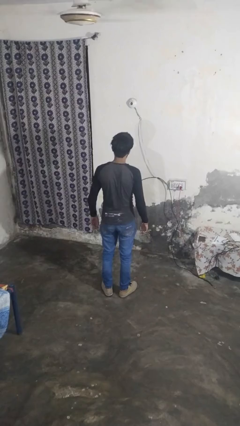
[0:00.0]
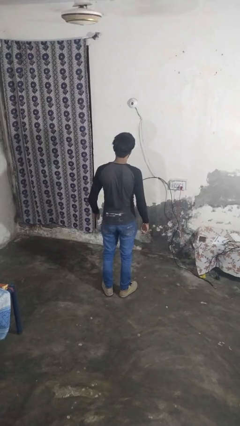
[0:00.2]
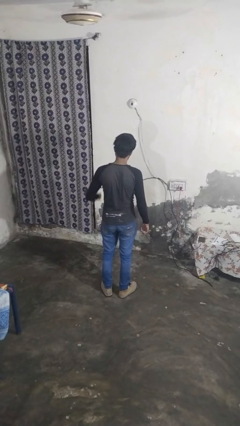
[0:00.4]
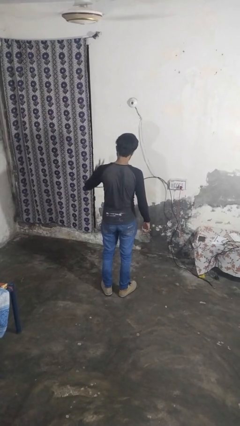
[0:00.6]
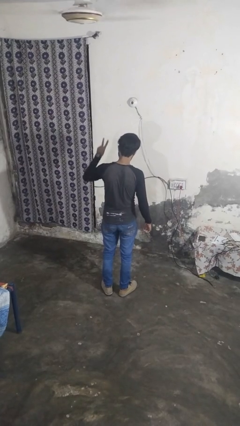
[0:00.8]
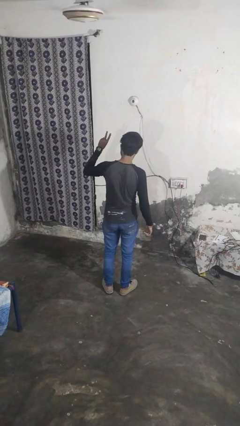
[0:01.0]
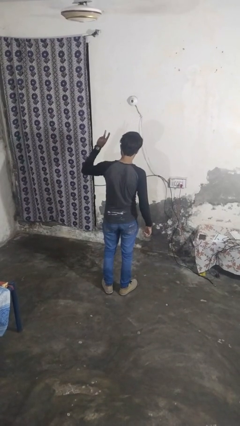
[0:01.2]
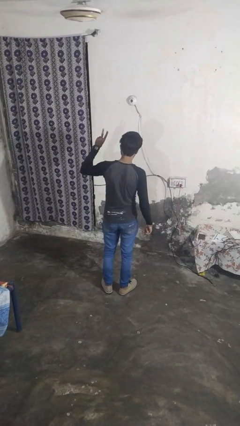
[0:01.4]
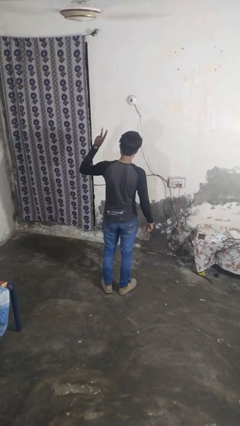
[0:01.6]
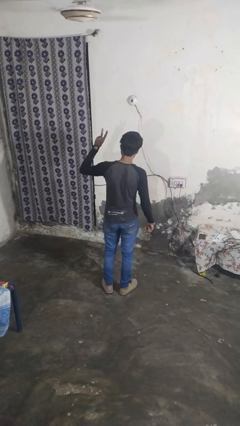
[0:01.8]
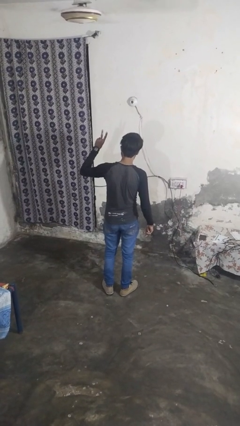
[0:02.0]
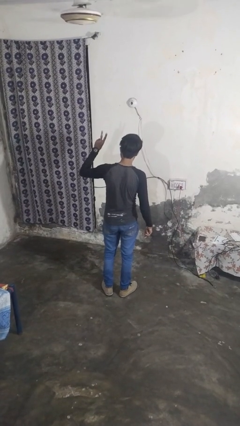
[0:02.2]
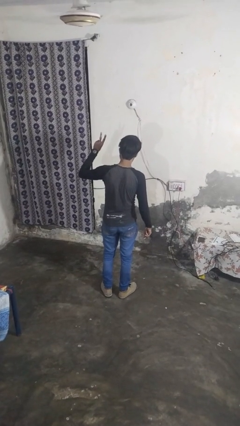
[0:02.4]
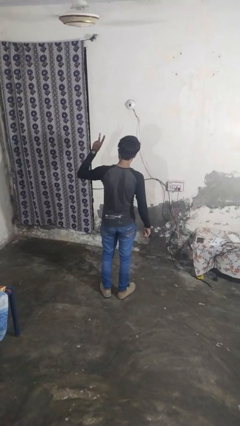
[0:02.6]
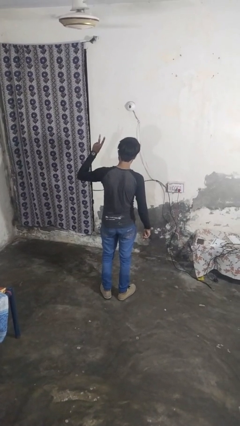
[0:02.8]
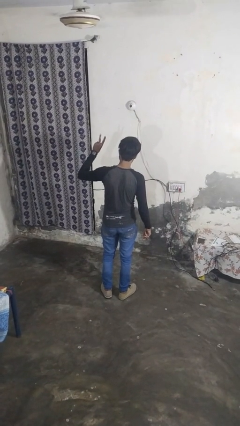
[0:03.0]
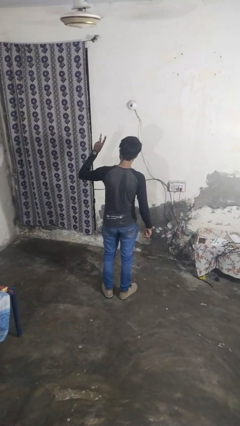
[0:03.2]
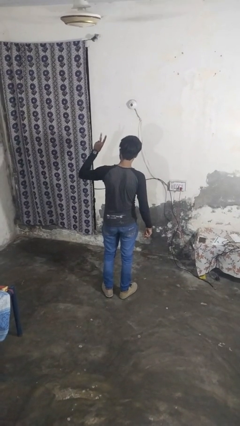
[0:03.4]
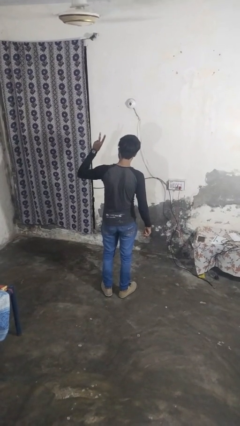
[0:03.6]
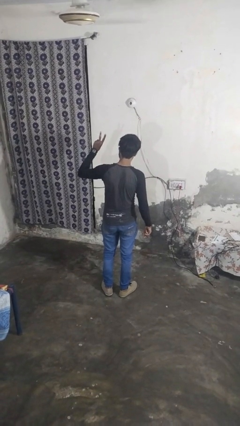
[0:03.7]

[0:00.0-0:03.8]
person gestures peace

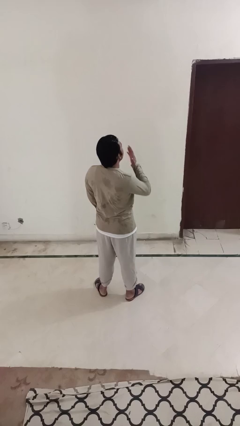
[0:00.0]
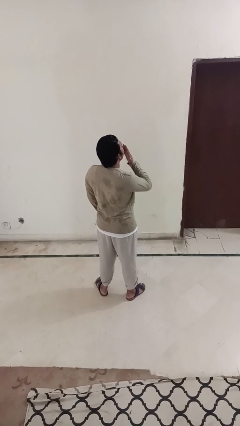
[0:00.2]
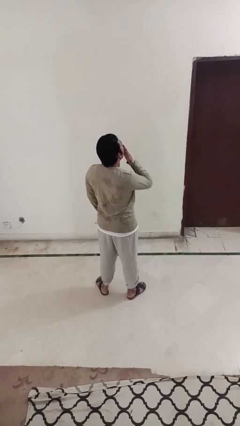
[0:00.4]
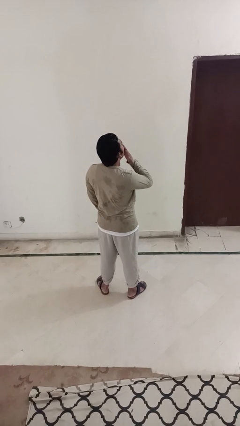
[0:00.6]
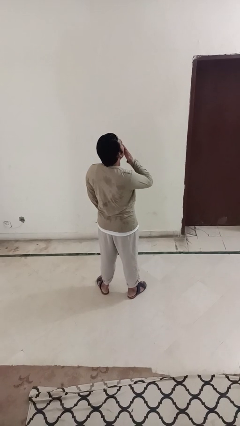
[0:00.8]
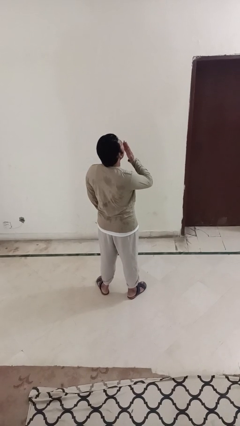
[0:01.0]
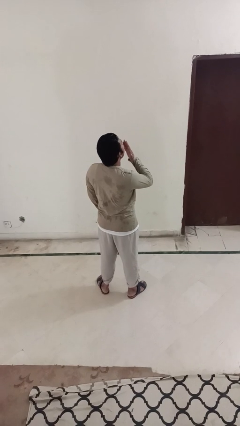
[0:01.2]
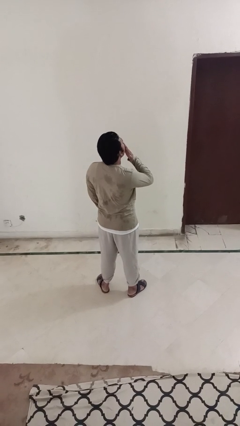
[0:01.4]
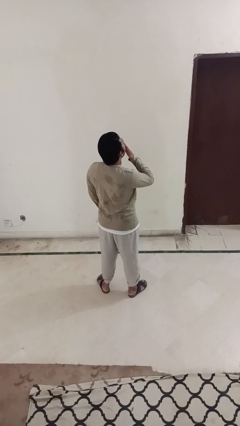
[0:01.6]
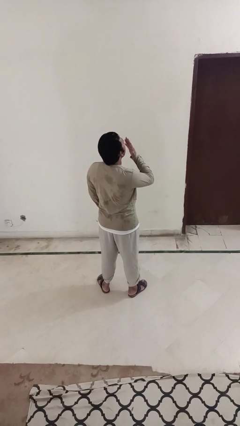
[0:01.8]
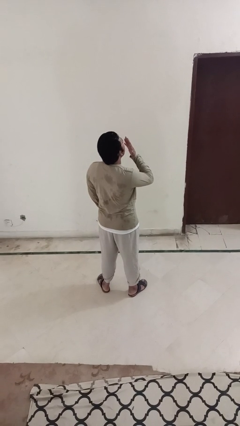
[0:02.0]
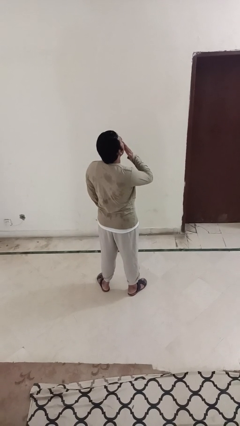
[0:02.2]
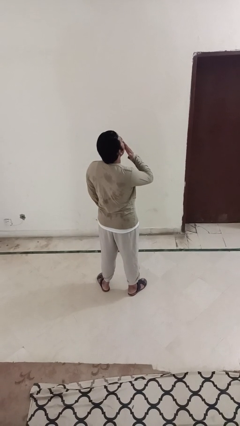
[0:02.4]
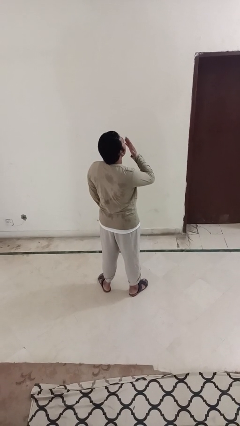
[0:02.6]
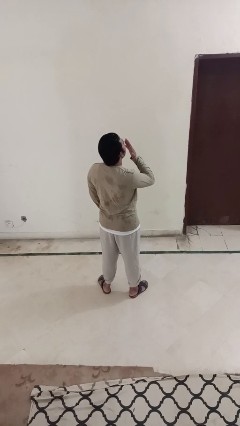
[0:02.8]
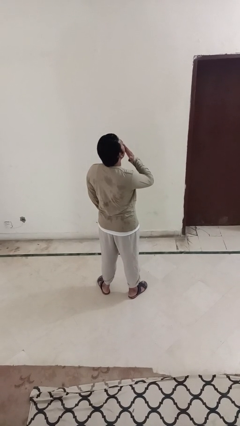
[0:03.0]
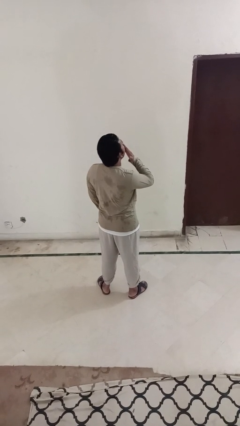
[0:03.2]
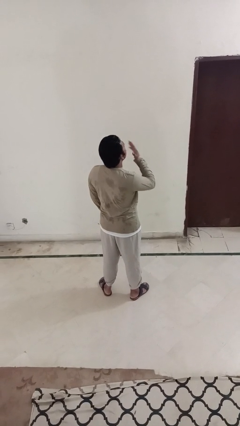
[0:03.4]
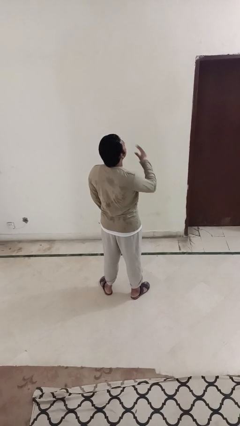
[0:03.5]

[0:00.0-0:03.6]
person yawns

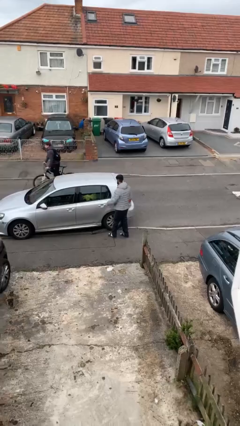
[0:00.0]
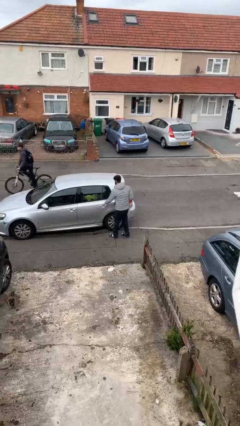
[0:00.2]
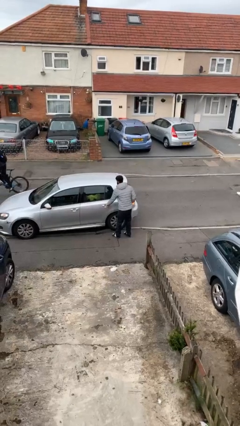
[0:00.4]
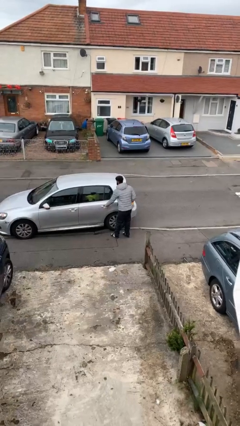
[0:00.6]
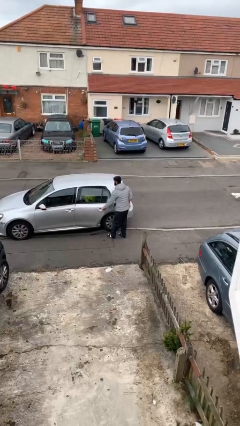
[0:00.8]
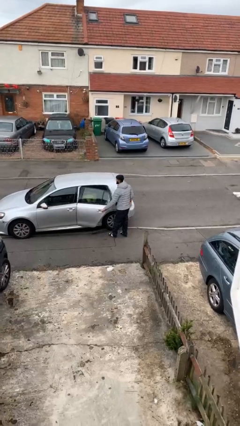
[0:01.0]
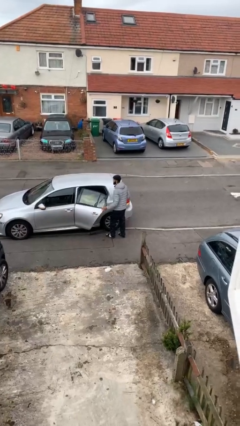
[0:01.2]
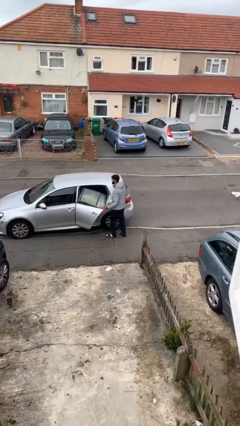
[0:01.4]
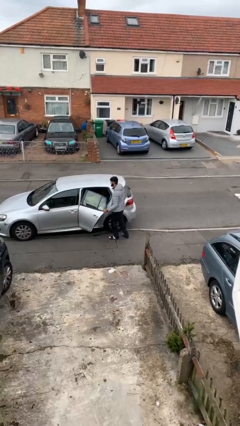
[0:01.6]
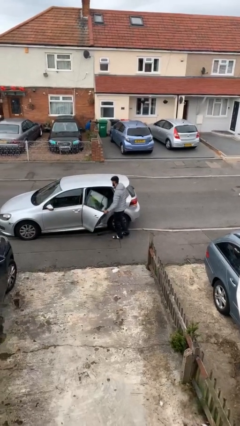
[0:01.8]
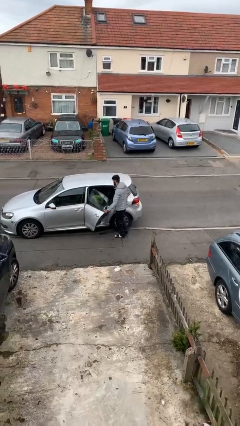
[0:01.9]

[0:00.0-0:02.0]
person opens car door

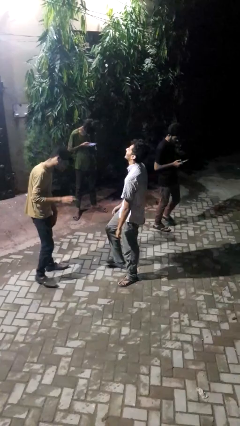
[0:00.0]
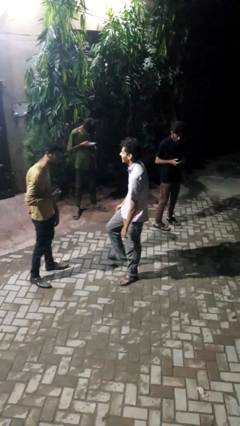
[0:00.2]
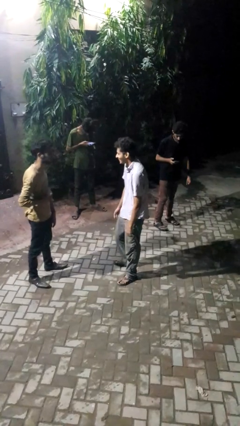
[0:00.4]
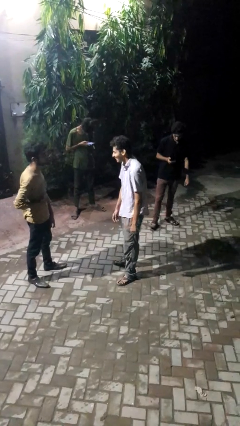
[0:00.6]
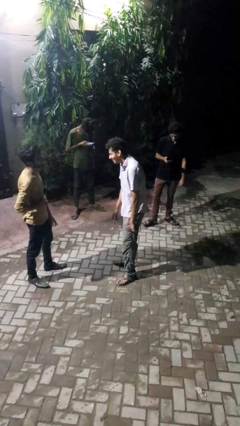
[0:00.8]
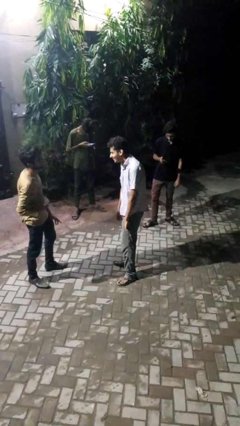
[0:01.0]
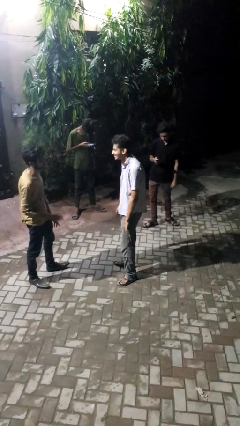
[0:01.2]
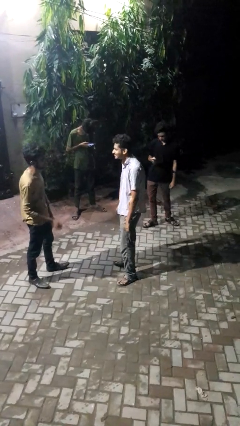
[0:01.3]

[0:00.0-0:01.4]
person laughs with person

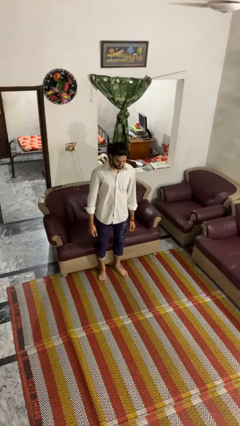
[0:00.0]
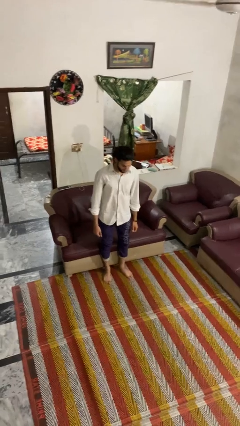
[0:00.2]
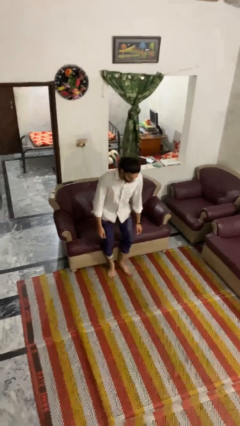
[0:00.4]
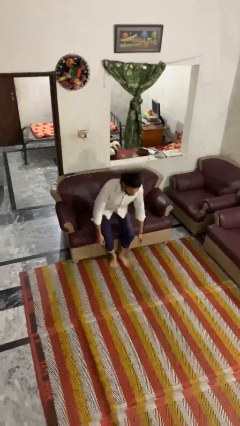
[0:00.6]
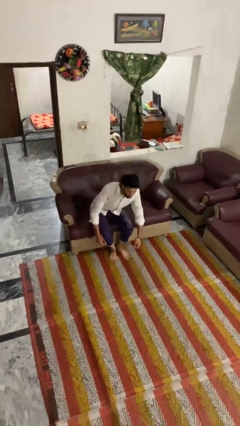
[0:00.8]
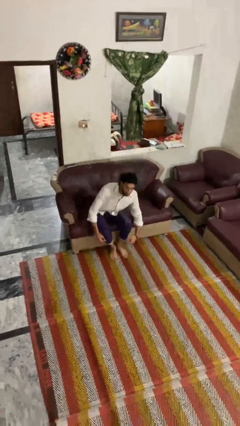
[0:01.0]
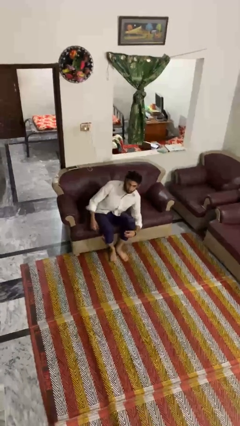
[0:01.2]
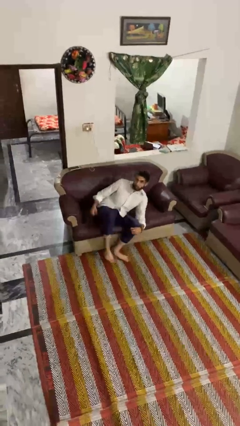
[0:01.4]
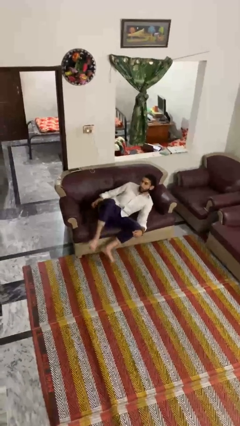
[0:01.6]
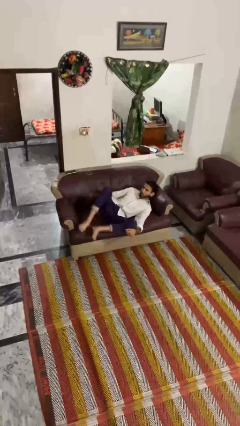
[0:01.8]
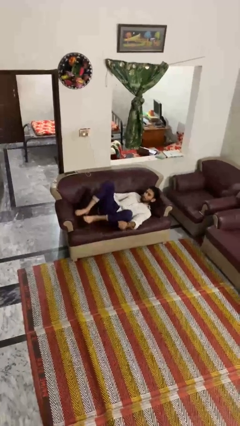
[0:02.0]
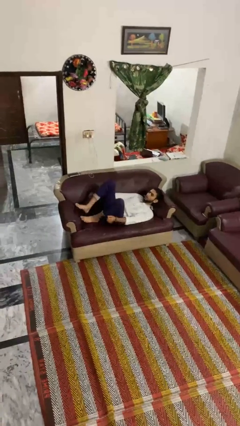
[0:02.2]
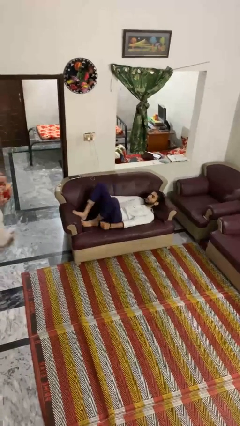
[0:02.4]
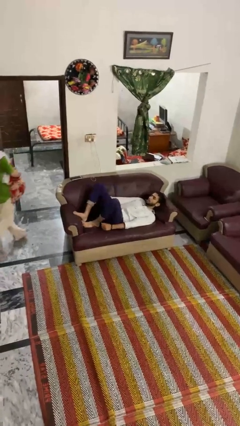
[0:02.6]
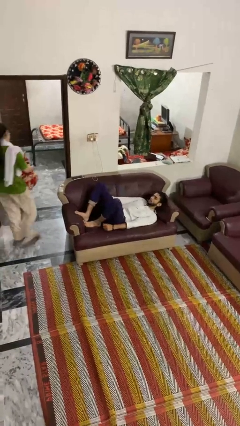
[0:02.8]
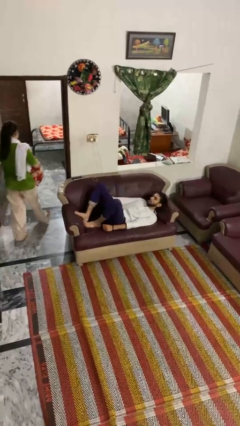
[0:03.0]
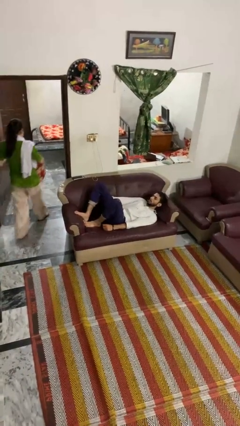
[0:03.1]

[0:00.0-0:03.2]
person lies down on couch

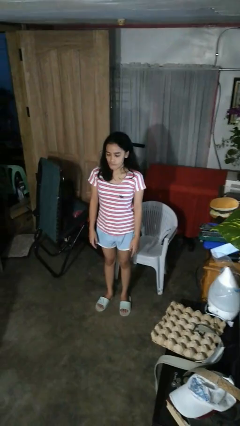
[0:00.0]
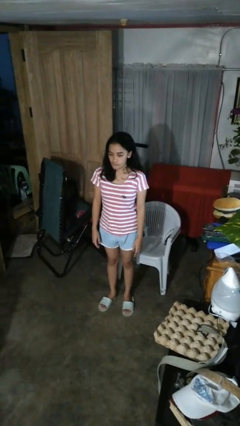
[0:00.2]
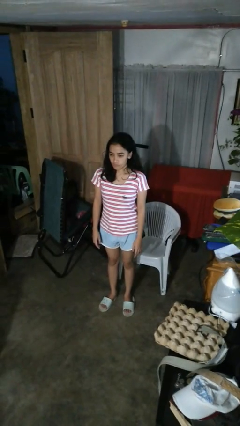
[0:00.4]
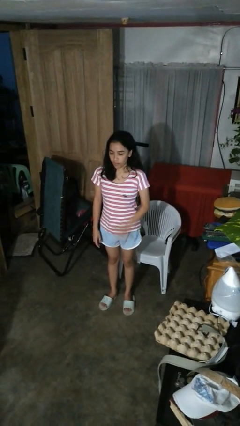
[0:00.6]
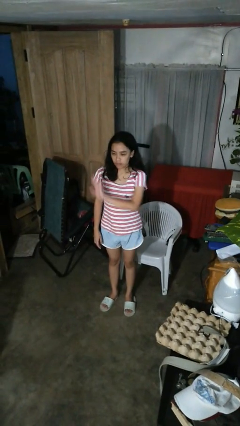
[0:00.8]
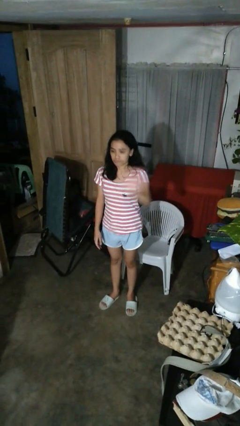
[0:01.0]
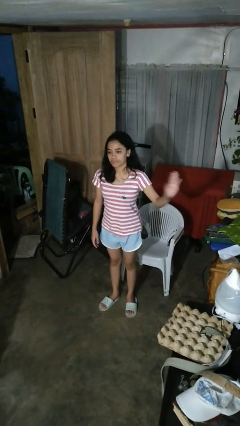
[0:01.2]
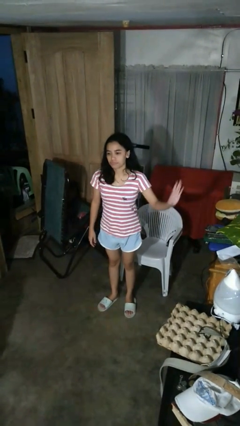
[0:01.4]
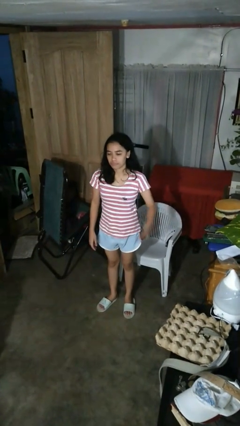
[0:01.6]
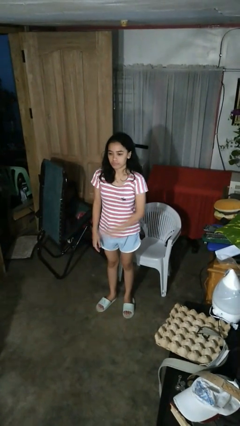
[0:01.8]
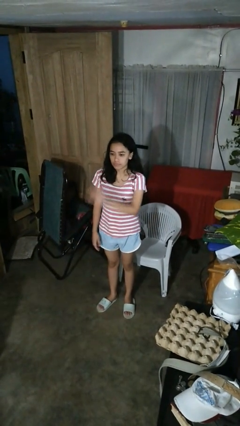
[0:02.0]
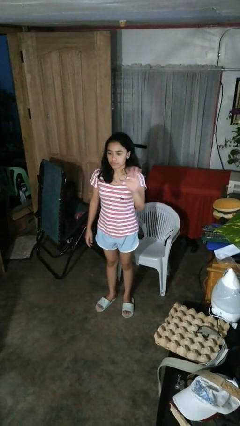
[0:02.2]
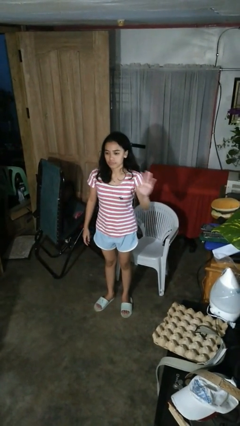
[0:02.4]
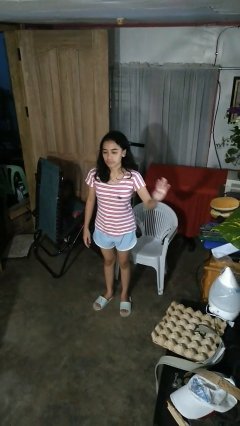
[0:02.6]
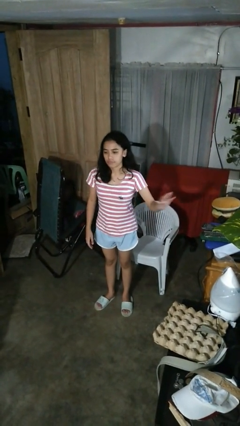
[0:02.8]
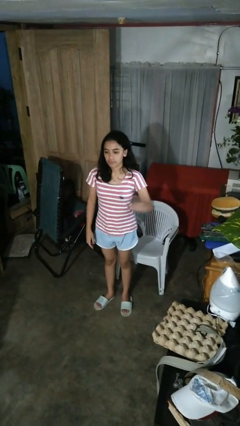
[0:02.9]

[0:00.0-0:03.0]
person gestures swipe left

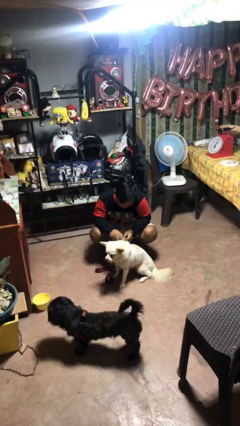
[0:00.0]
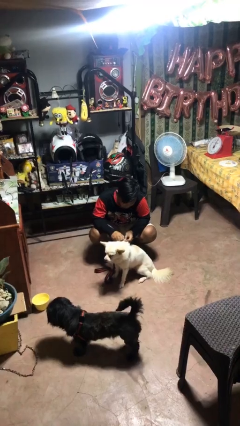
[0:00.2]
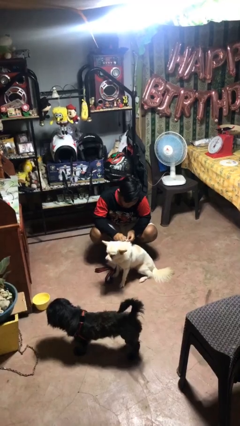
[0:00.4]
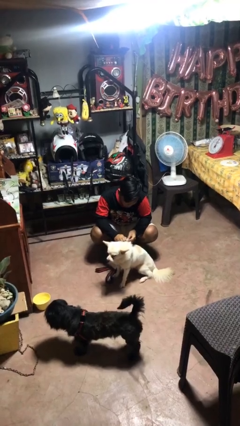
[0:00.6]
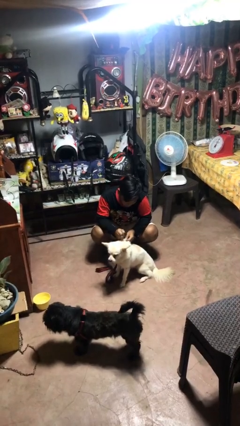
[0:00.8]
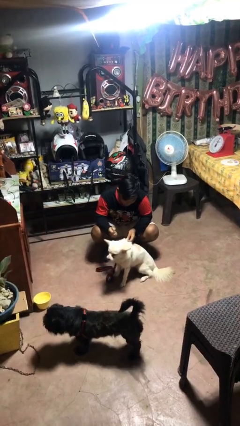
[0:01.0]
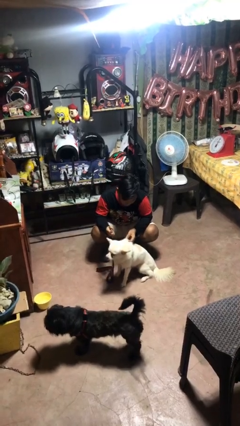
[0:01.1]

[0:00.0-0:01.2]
person unattaches leash from dog
